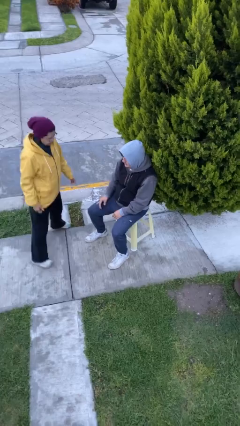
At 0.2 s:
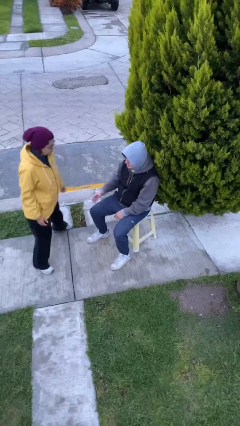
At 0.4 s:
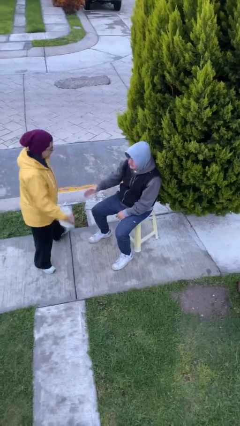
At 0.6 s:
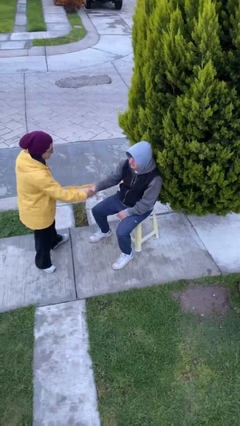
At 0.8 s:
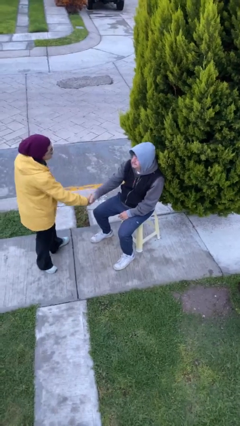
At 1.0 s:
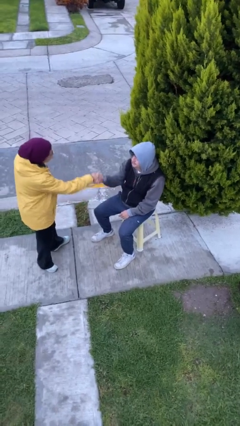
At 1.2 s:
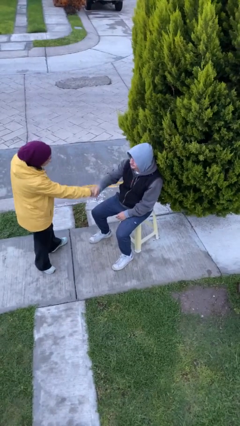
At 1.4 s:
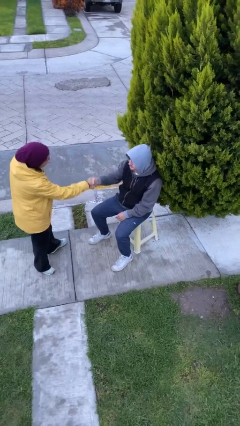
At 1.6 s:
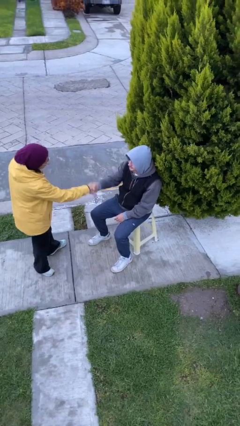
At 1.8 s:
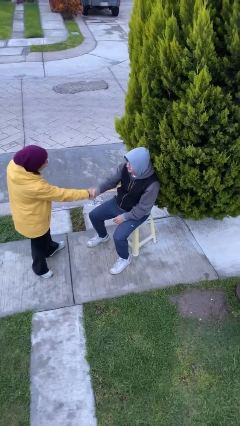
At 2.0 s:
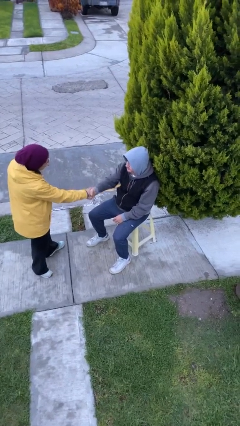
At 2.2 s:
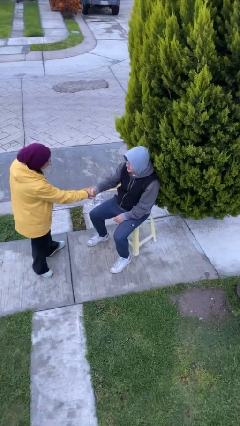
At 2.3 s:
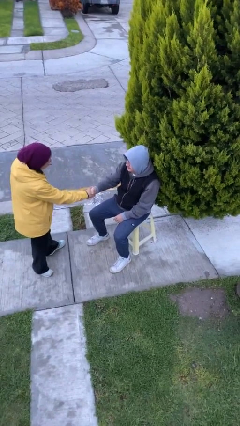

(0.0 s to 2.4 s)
person shakes hand

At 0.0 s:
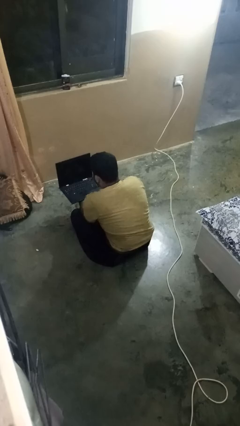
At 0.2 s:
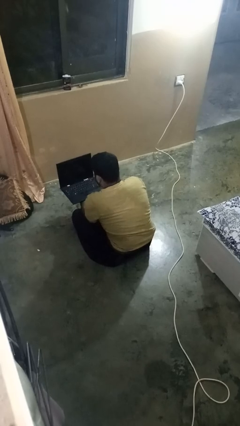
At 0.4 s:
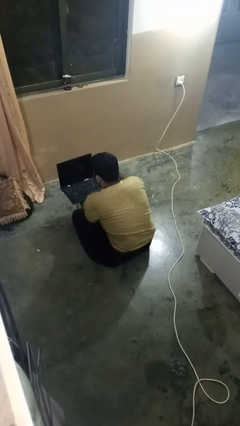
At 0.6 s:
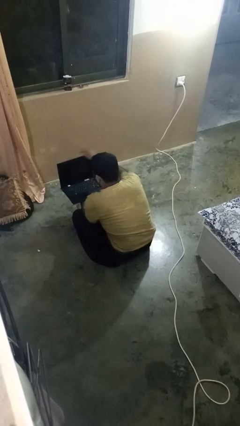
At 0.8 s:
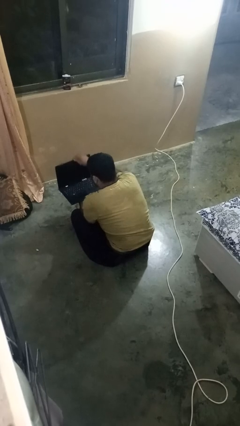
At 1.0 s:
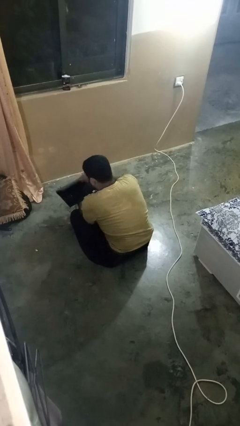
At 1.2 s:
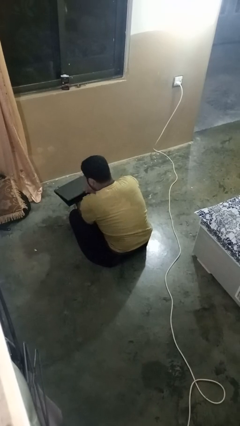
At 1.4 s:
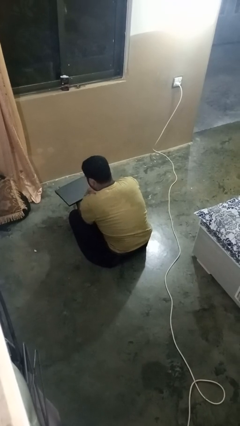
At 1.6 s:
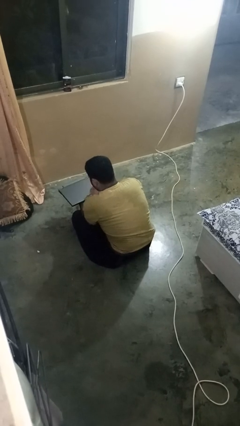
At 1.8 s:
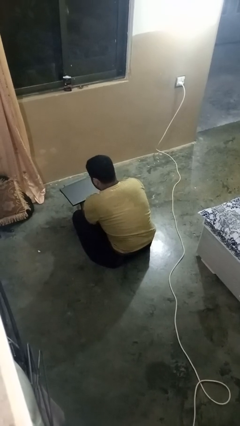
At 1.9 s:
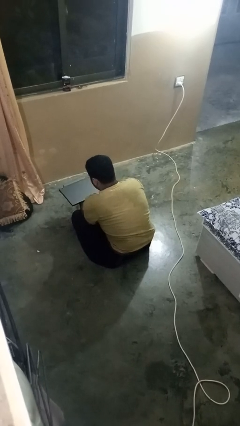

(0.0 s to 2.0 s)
person closes laptop

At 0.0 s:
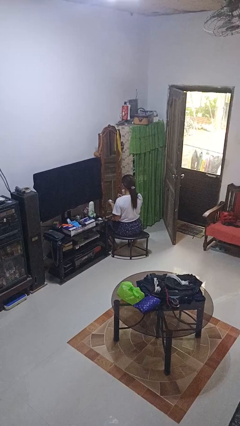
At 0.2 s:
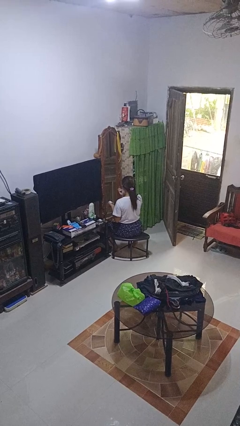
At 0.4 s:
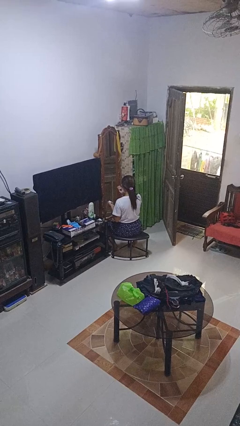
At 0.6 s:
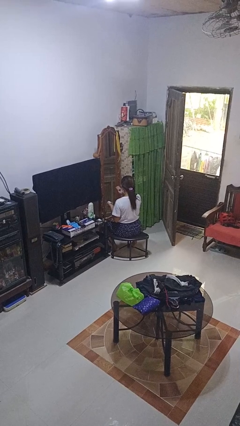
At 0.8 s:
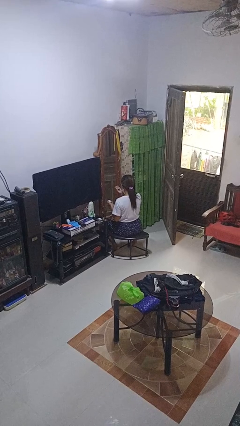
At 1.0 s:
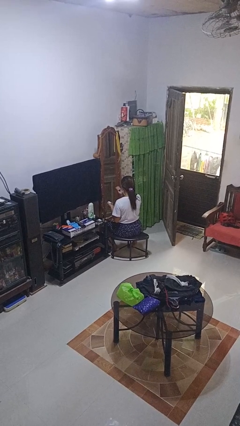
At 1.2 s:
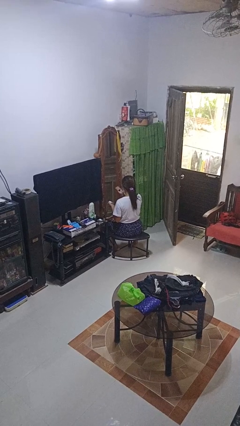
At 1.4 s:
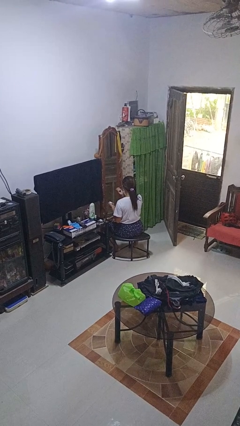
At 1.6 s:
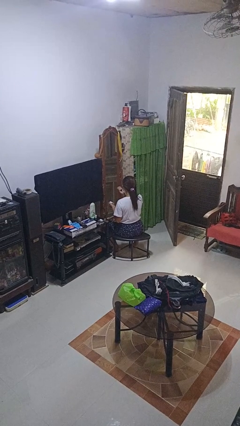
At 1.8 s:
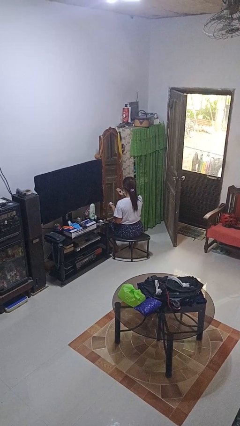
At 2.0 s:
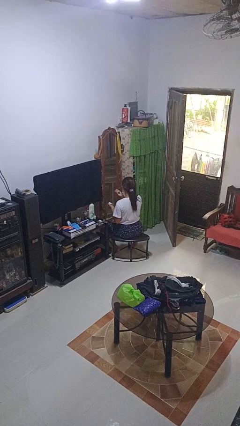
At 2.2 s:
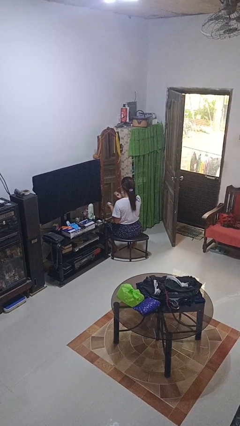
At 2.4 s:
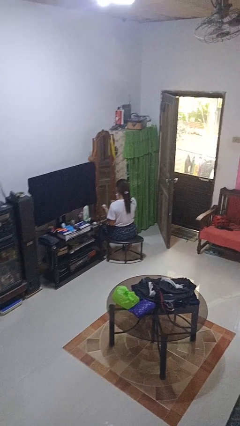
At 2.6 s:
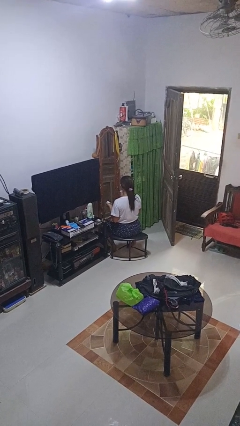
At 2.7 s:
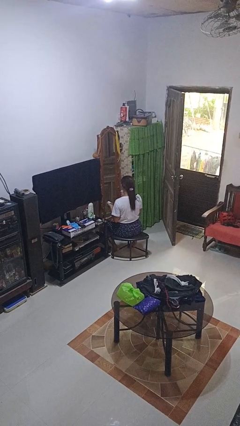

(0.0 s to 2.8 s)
person applies eye makeup

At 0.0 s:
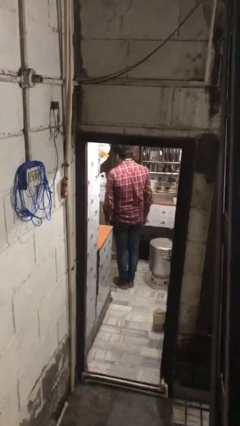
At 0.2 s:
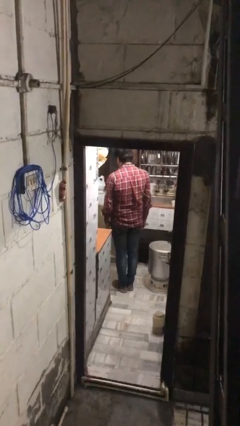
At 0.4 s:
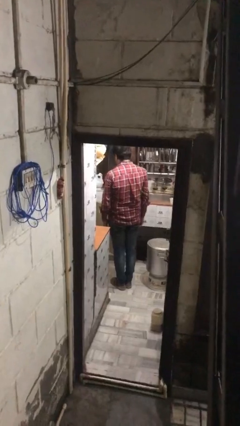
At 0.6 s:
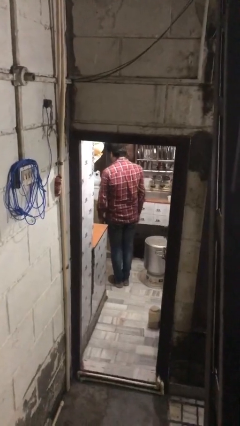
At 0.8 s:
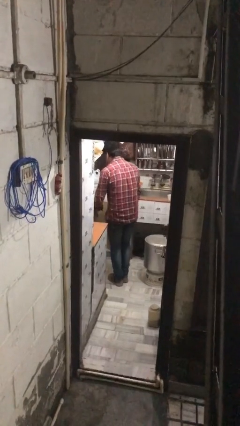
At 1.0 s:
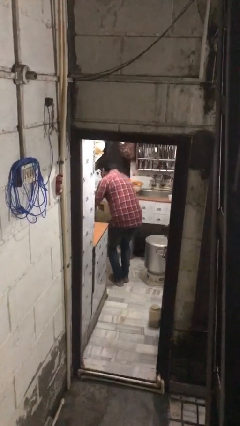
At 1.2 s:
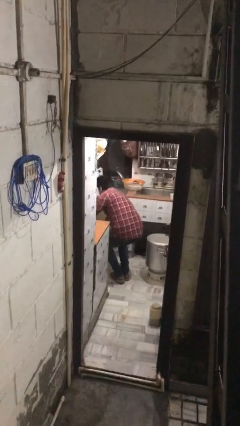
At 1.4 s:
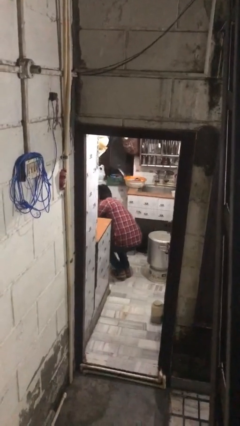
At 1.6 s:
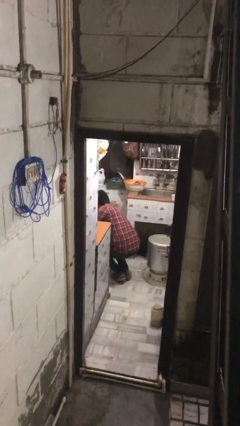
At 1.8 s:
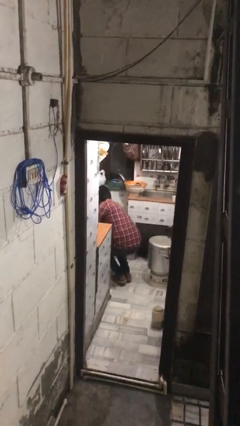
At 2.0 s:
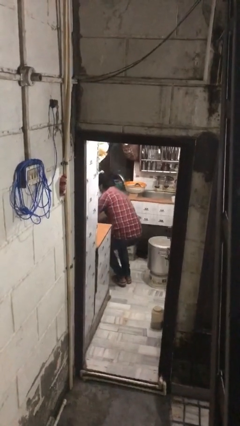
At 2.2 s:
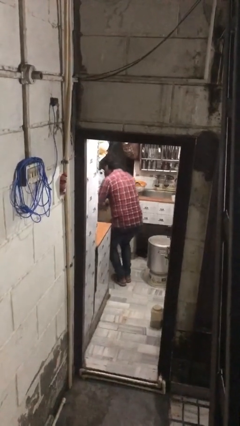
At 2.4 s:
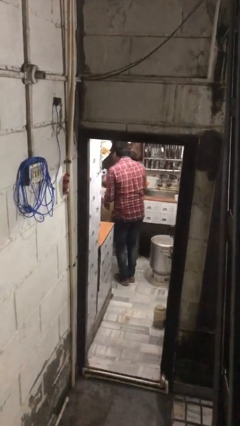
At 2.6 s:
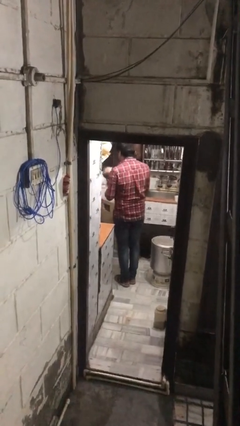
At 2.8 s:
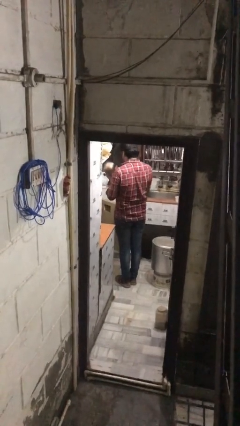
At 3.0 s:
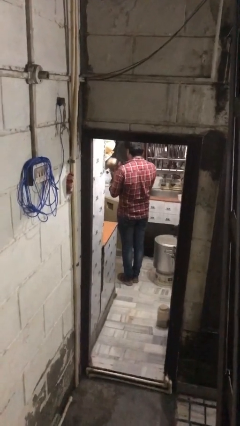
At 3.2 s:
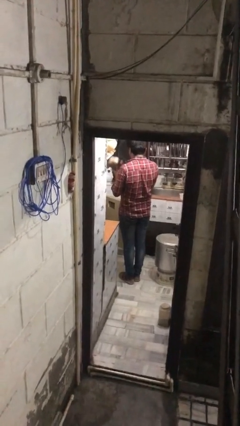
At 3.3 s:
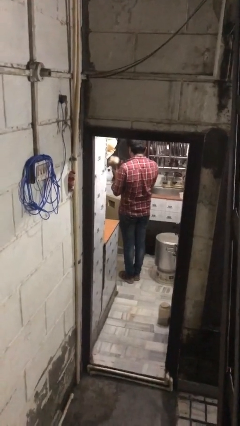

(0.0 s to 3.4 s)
person takes object from kitchen drawer

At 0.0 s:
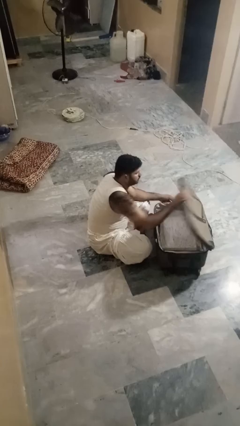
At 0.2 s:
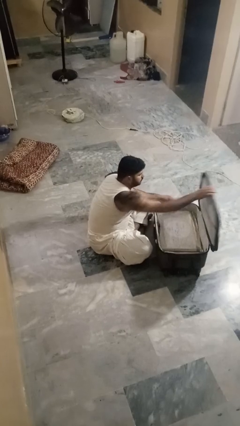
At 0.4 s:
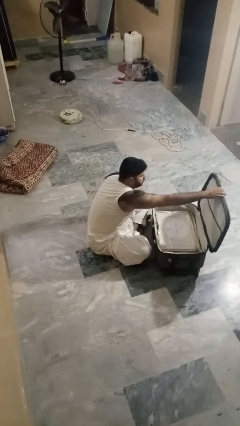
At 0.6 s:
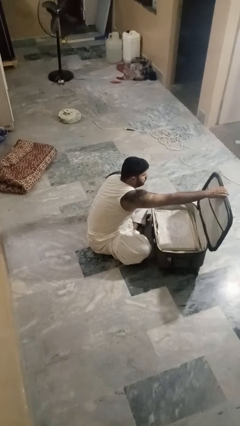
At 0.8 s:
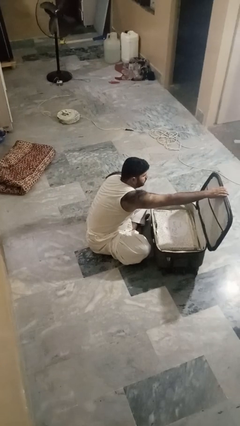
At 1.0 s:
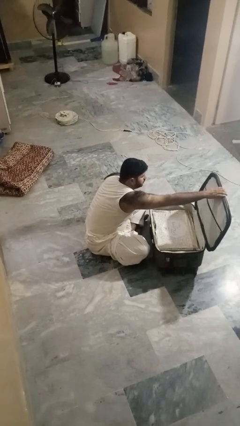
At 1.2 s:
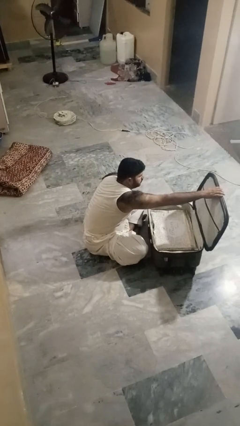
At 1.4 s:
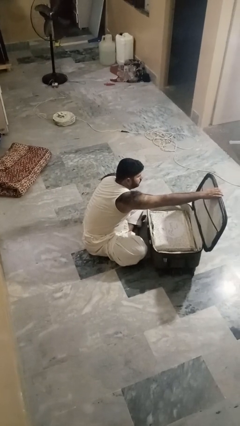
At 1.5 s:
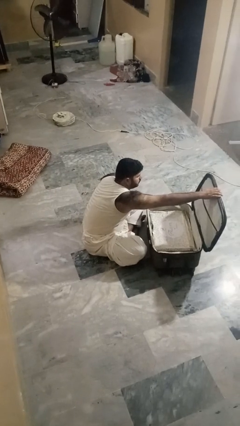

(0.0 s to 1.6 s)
person opens suitcase

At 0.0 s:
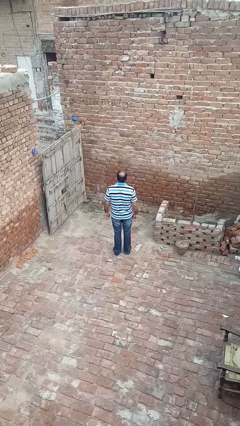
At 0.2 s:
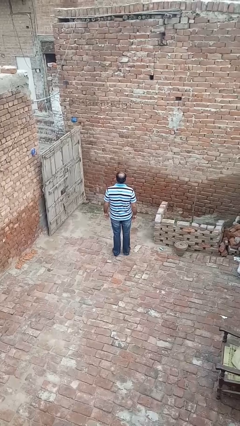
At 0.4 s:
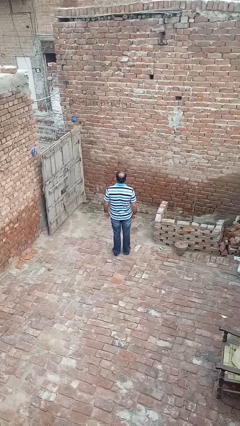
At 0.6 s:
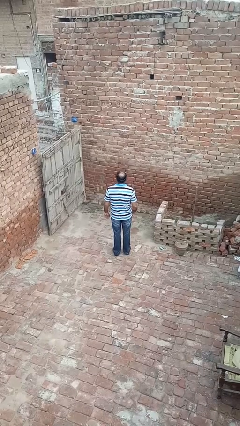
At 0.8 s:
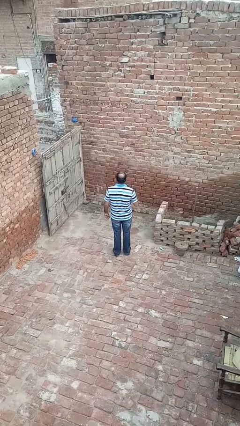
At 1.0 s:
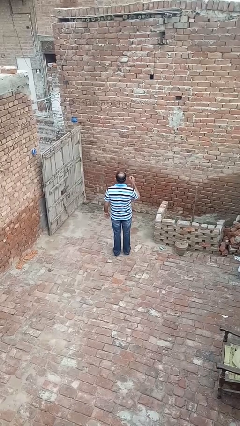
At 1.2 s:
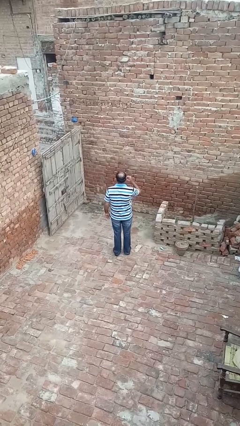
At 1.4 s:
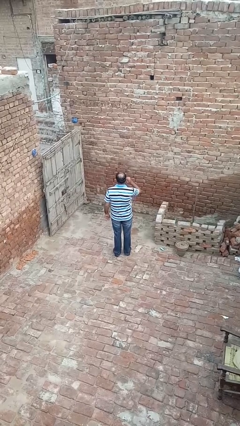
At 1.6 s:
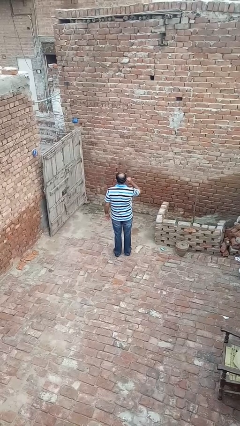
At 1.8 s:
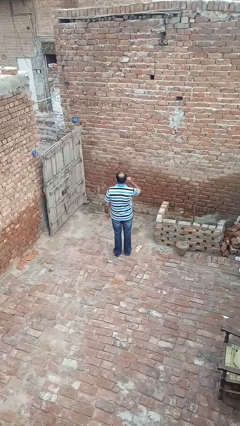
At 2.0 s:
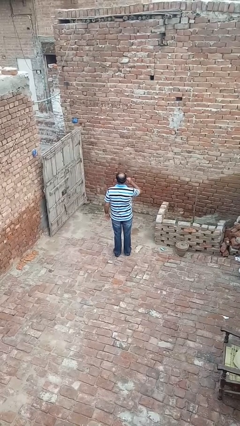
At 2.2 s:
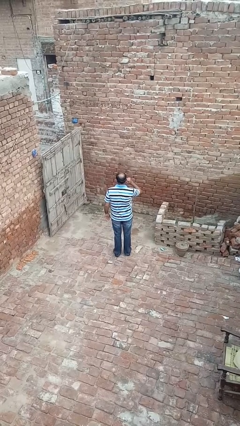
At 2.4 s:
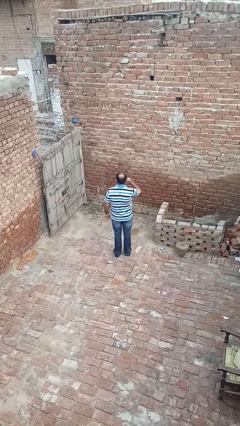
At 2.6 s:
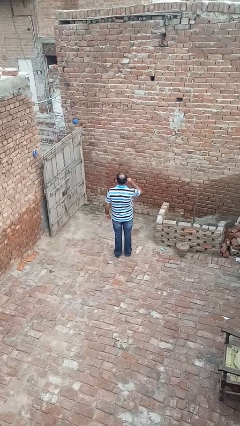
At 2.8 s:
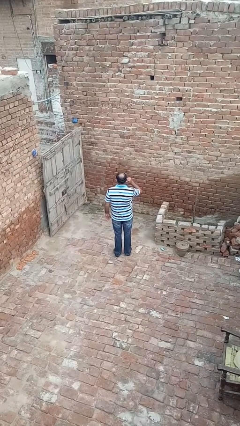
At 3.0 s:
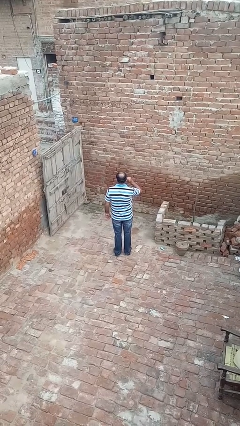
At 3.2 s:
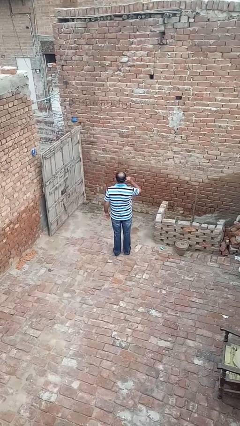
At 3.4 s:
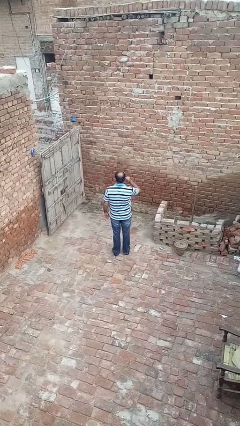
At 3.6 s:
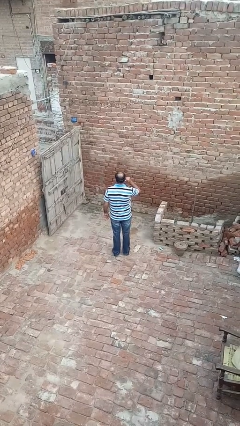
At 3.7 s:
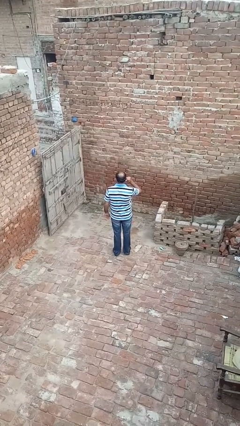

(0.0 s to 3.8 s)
person touches earlobe

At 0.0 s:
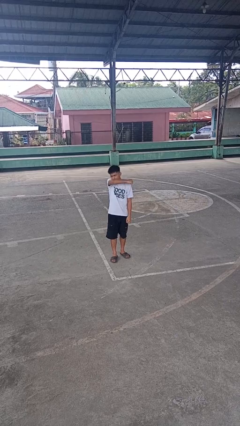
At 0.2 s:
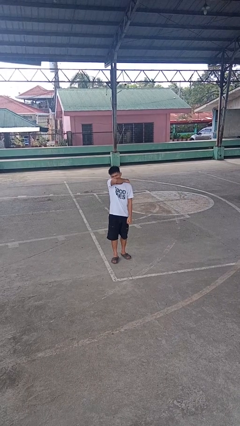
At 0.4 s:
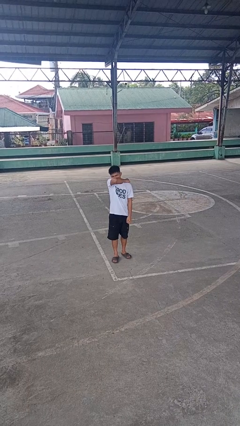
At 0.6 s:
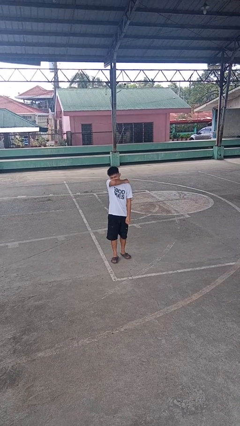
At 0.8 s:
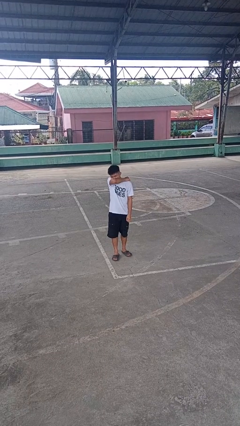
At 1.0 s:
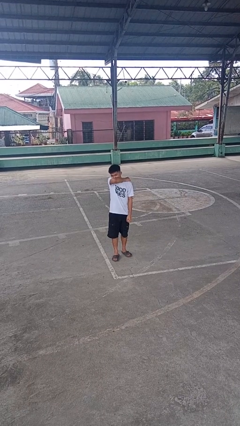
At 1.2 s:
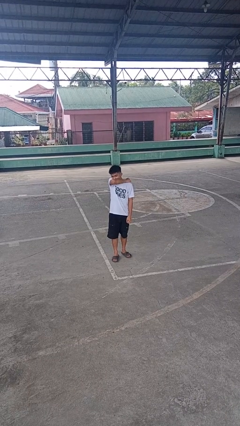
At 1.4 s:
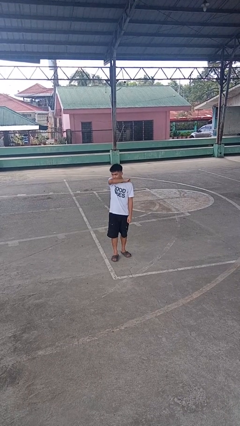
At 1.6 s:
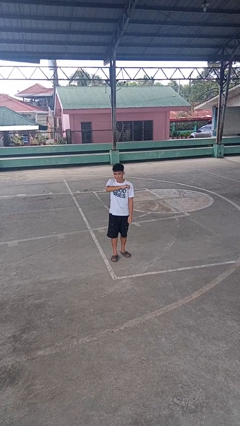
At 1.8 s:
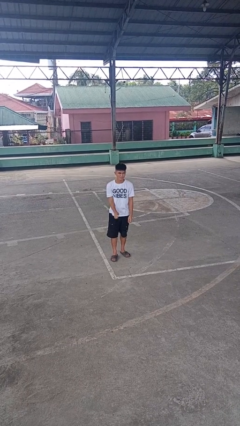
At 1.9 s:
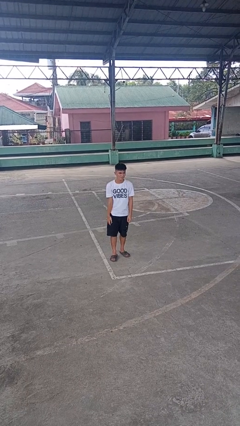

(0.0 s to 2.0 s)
person sneezes into arm
